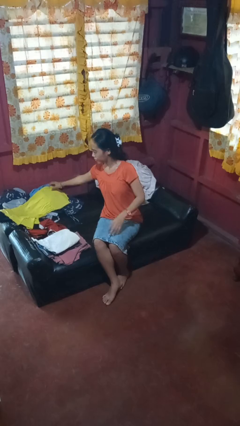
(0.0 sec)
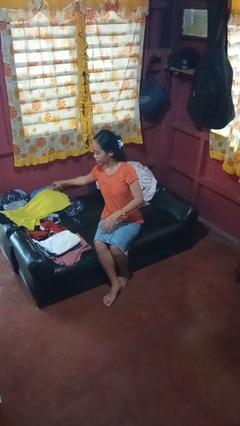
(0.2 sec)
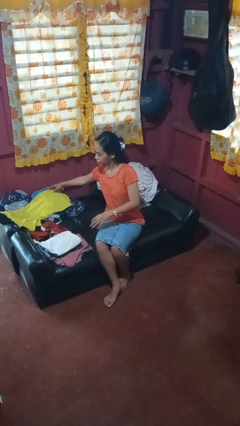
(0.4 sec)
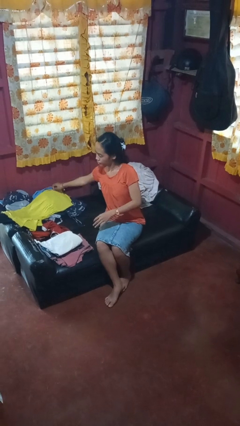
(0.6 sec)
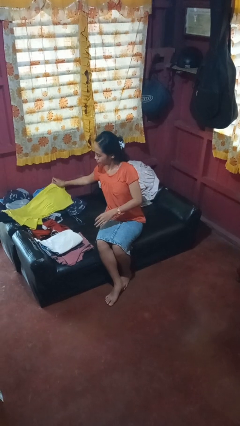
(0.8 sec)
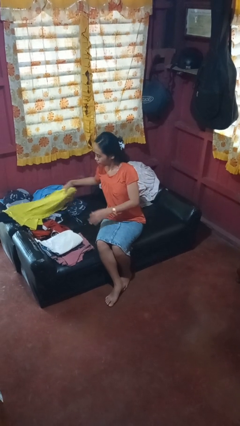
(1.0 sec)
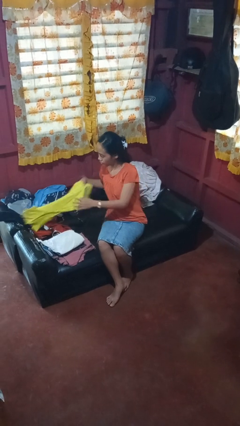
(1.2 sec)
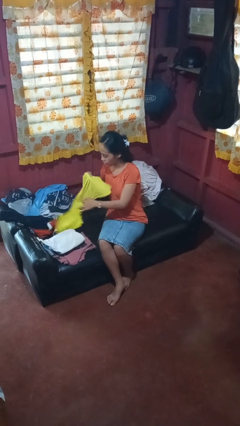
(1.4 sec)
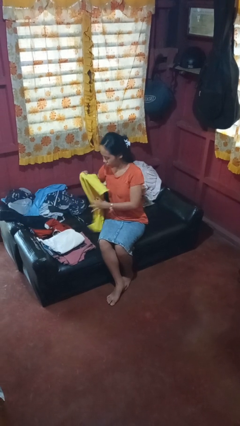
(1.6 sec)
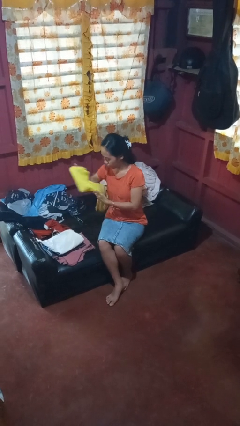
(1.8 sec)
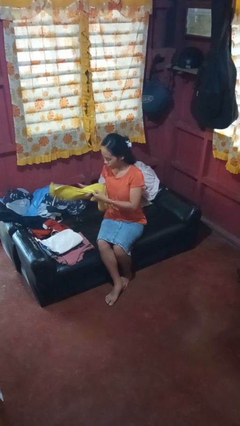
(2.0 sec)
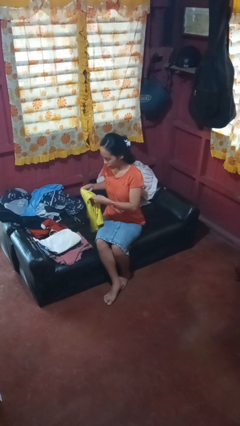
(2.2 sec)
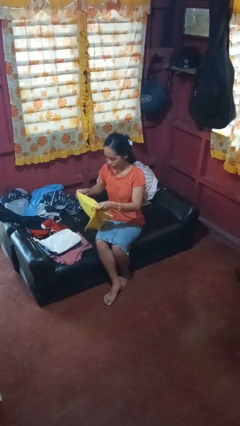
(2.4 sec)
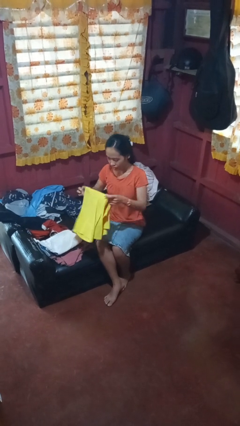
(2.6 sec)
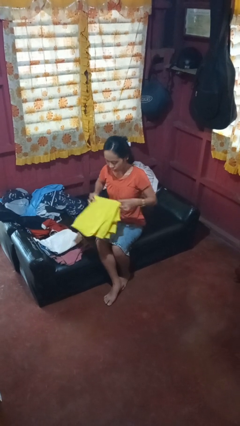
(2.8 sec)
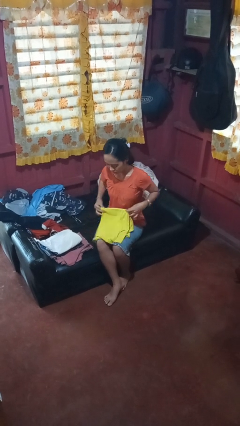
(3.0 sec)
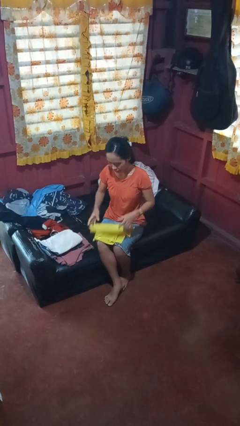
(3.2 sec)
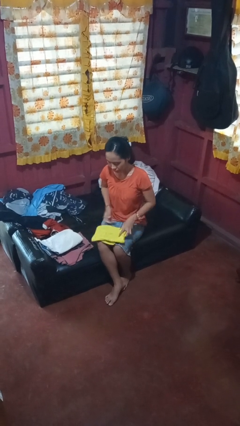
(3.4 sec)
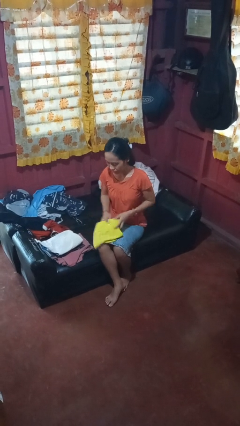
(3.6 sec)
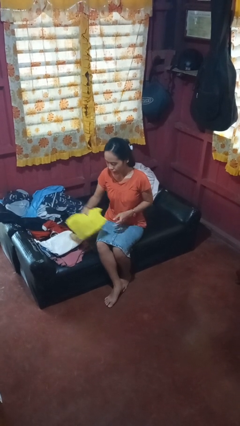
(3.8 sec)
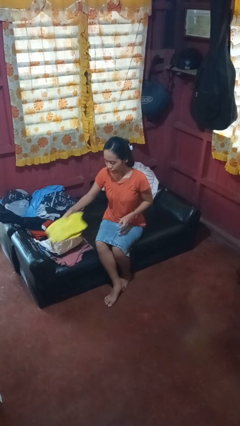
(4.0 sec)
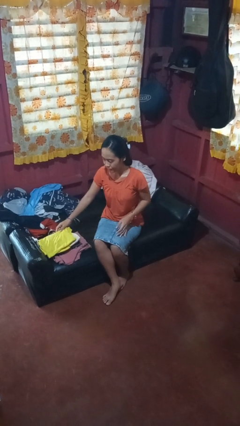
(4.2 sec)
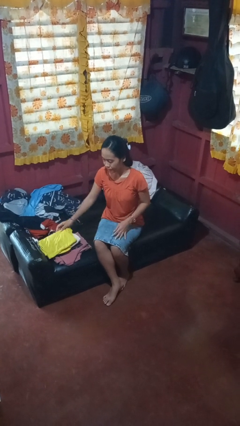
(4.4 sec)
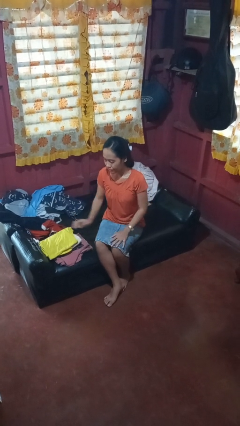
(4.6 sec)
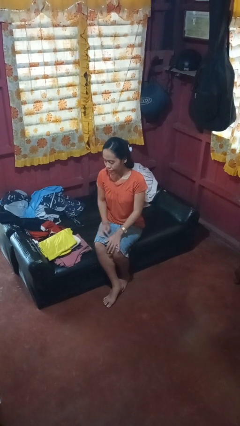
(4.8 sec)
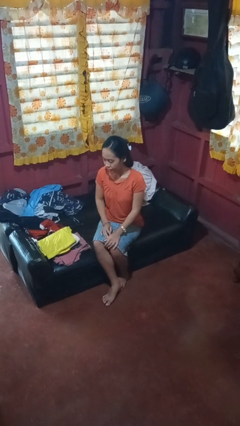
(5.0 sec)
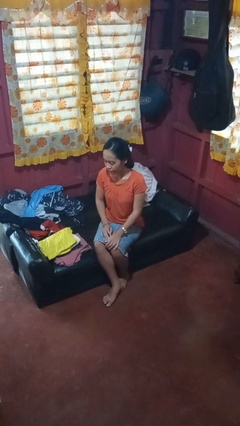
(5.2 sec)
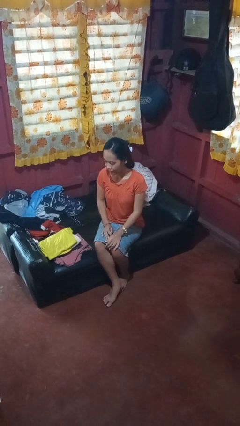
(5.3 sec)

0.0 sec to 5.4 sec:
person folds shirt

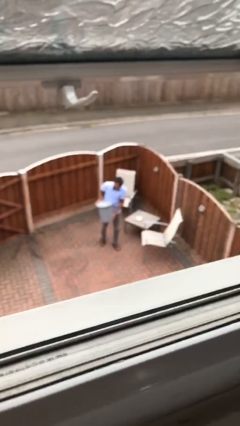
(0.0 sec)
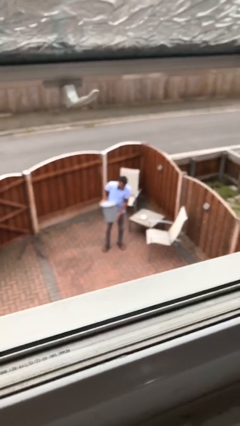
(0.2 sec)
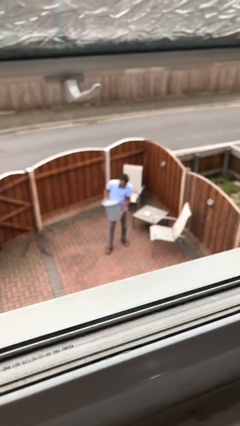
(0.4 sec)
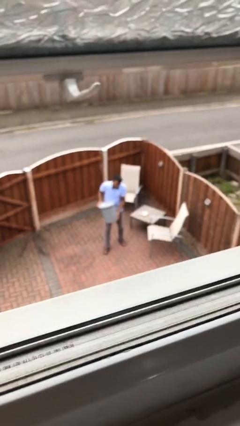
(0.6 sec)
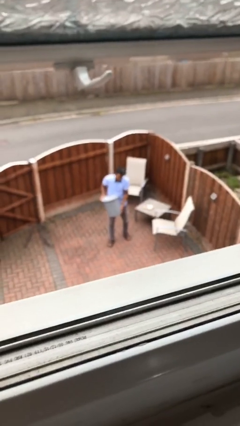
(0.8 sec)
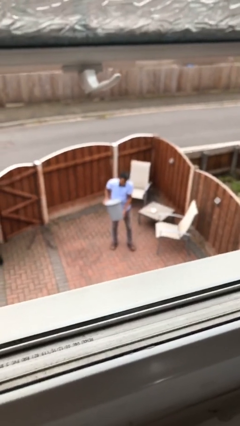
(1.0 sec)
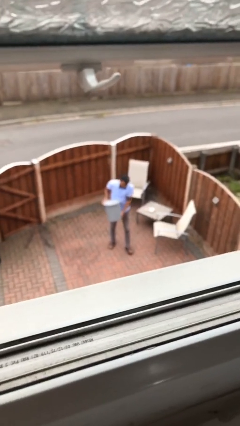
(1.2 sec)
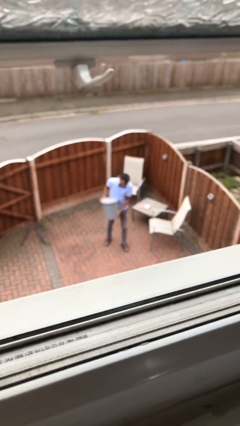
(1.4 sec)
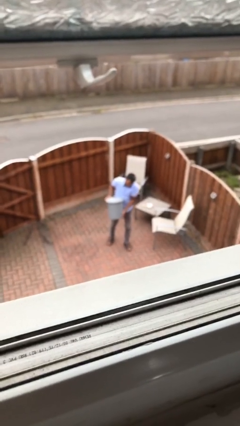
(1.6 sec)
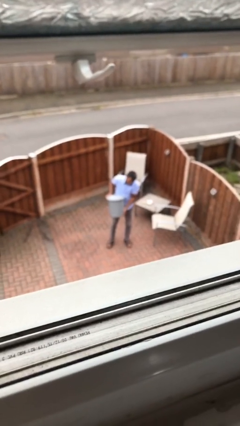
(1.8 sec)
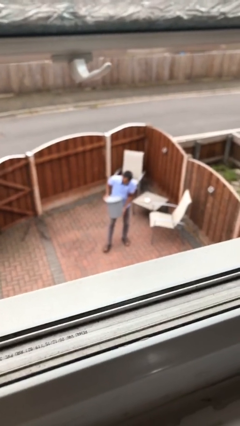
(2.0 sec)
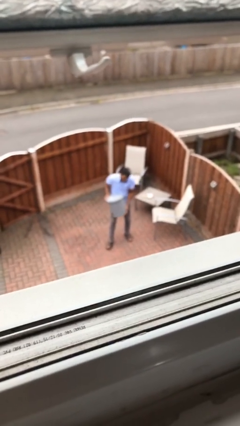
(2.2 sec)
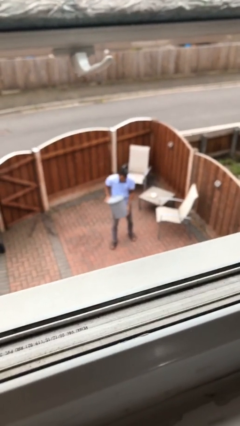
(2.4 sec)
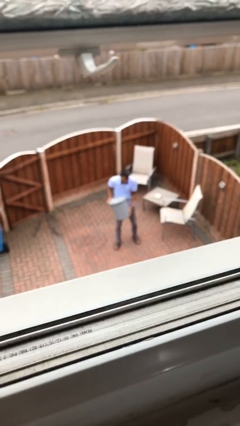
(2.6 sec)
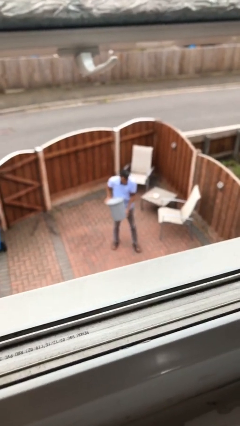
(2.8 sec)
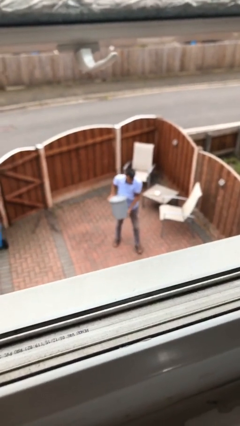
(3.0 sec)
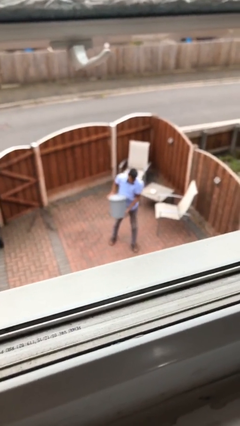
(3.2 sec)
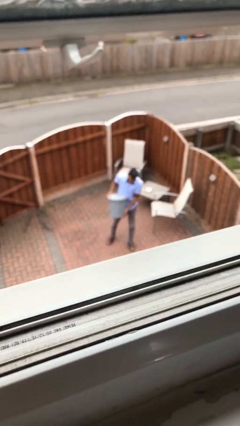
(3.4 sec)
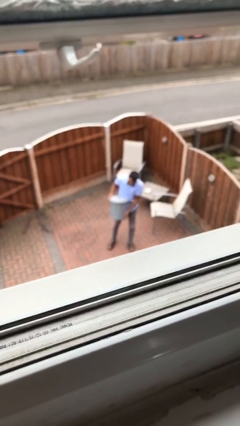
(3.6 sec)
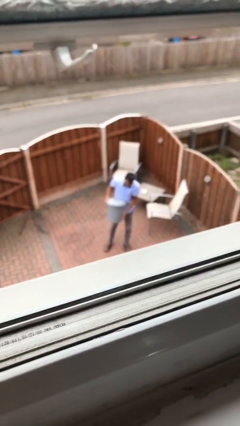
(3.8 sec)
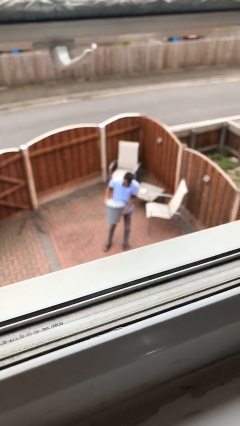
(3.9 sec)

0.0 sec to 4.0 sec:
person carries heavy object

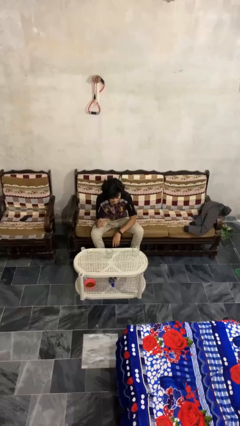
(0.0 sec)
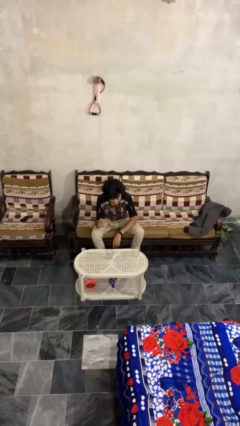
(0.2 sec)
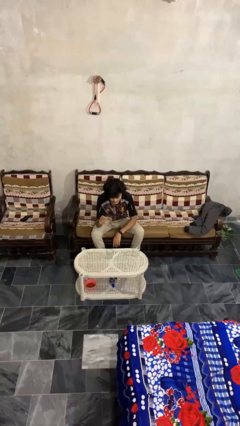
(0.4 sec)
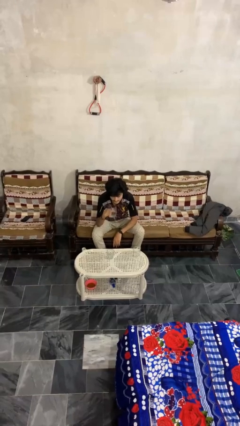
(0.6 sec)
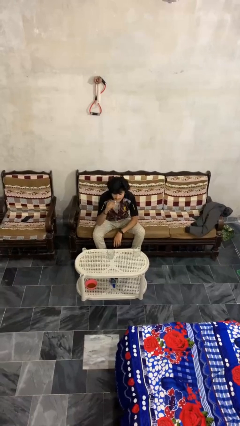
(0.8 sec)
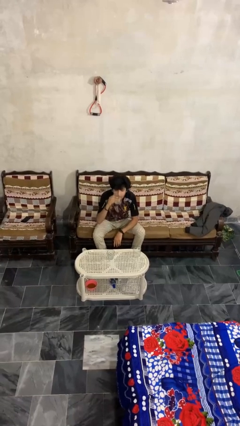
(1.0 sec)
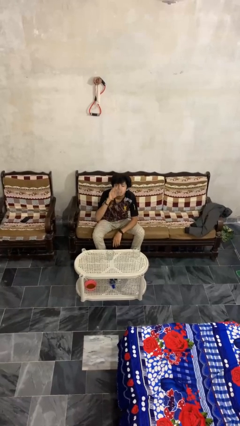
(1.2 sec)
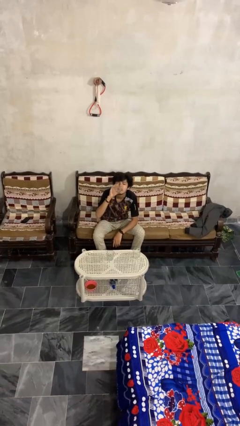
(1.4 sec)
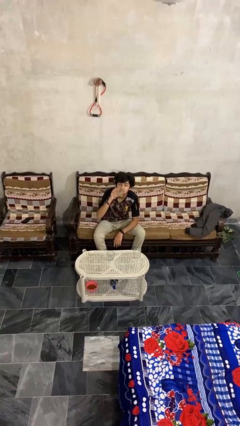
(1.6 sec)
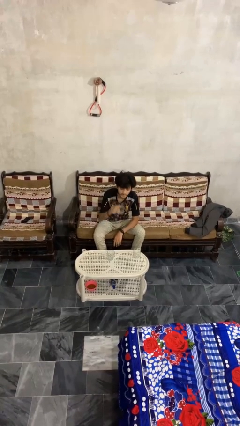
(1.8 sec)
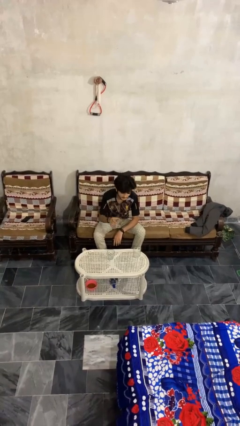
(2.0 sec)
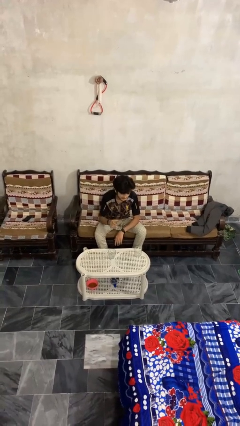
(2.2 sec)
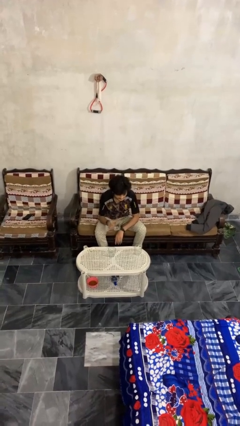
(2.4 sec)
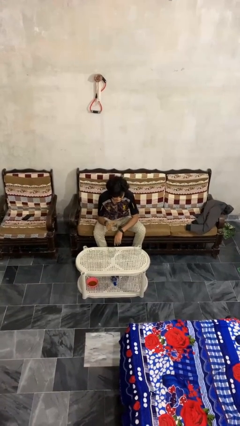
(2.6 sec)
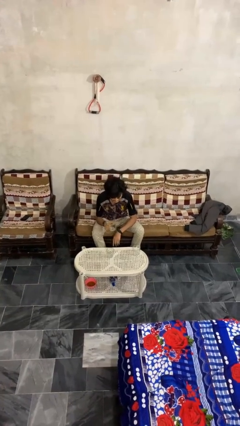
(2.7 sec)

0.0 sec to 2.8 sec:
person drinks from shotglass

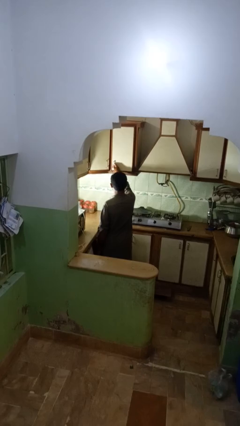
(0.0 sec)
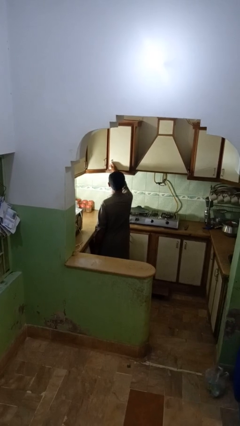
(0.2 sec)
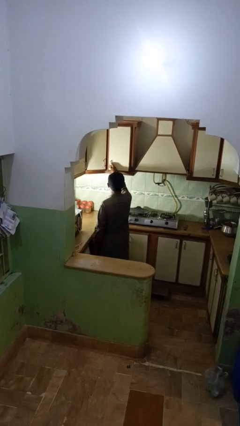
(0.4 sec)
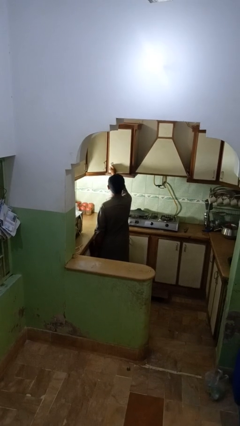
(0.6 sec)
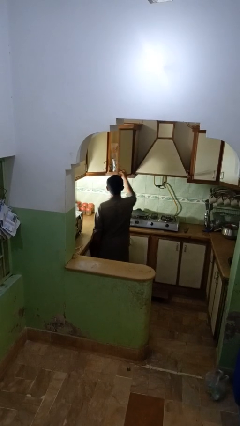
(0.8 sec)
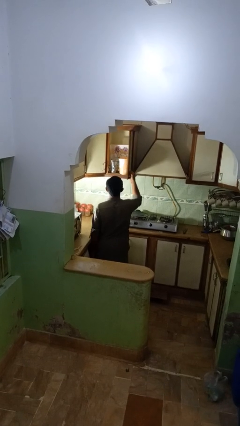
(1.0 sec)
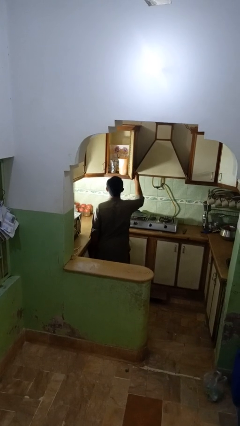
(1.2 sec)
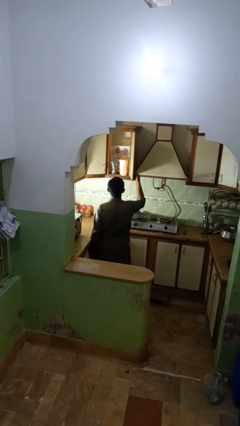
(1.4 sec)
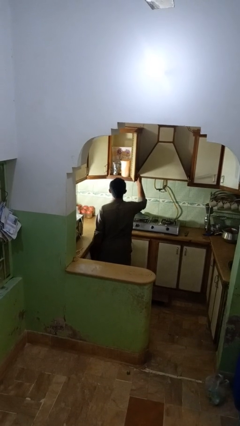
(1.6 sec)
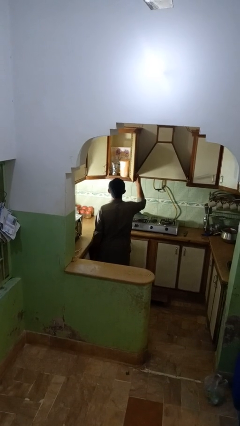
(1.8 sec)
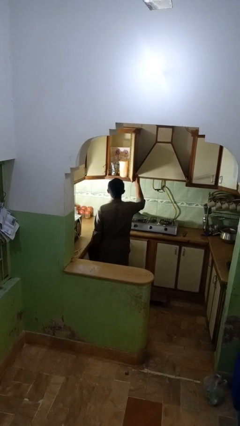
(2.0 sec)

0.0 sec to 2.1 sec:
person opens kitchen drawer

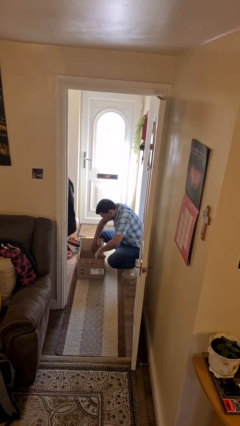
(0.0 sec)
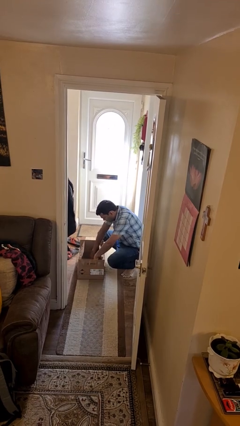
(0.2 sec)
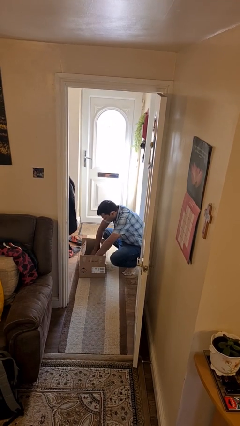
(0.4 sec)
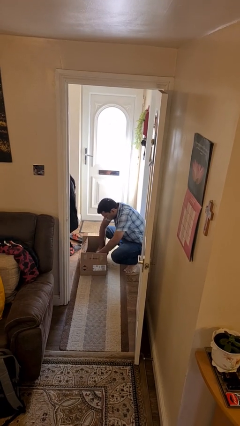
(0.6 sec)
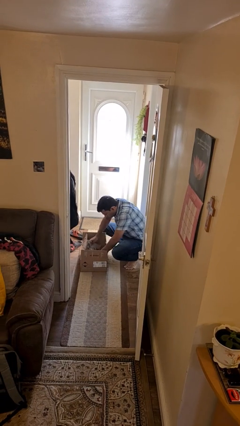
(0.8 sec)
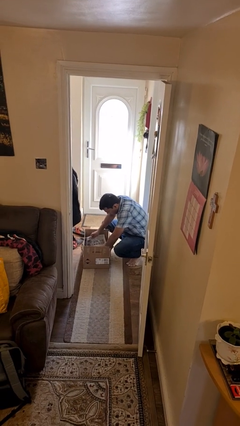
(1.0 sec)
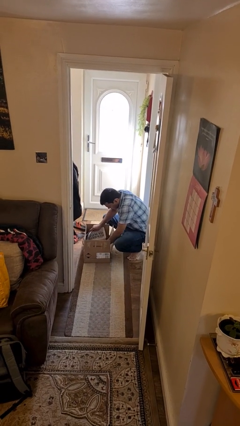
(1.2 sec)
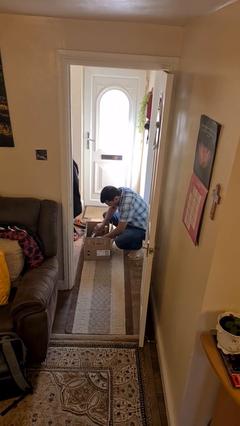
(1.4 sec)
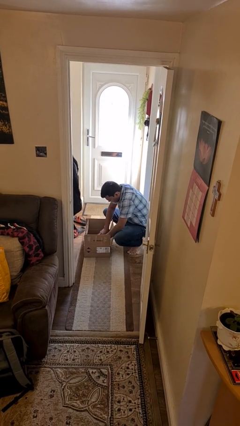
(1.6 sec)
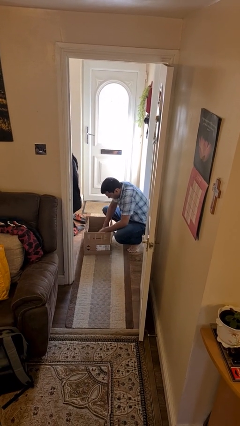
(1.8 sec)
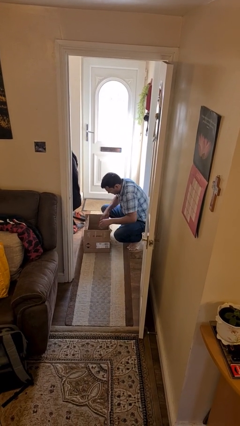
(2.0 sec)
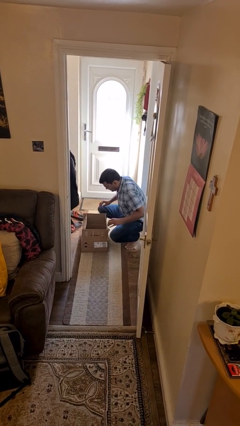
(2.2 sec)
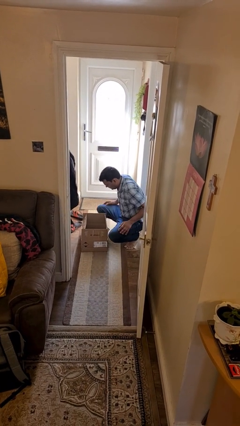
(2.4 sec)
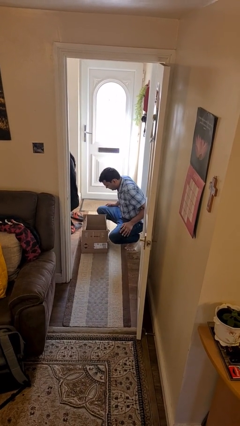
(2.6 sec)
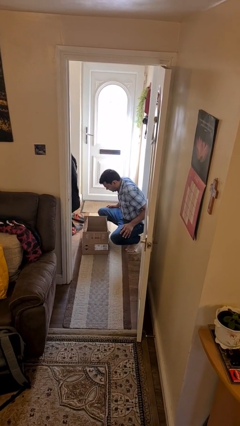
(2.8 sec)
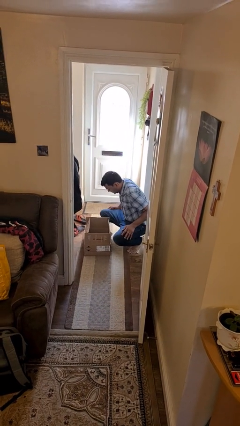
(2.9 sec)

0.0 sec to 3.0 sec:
person searches in box
